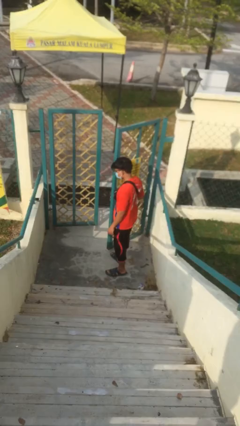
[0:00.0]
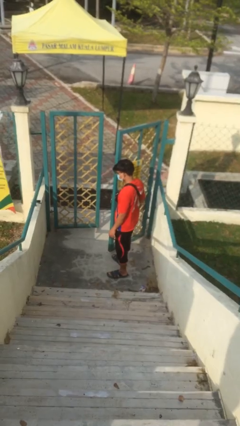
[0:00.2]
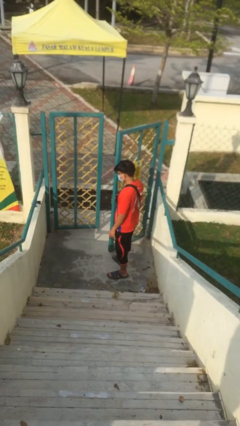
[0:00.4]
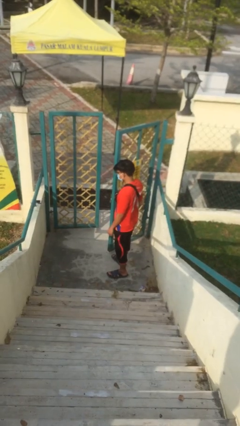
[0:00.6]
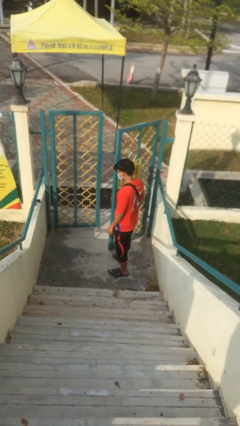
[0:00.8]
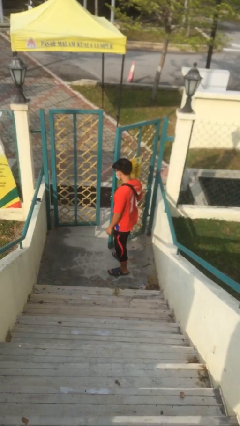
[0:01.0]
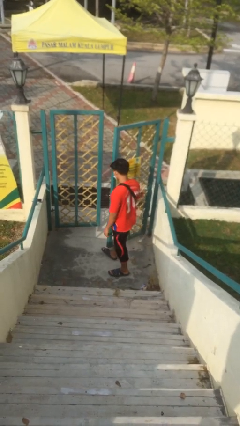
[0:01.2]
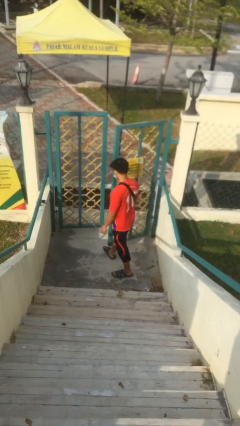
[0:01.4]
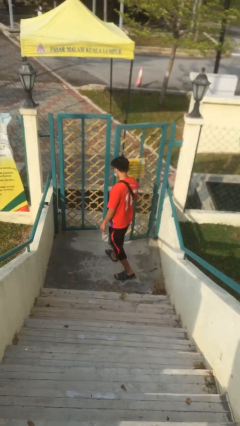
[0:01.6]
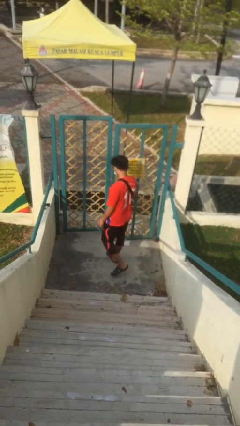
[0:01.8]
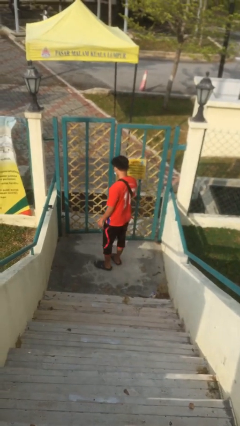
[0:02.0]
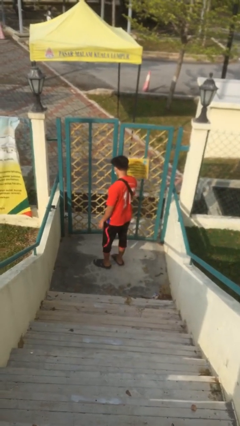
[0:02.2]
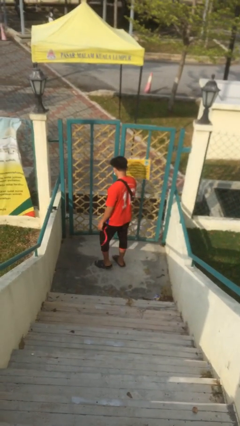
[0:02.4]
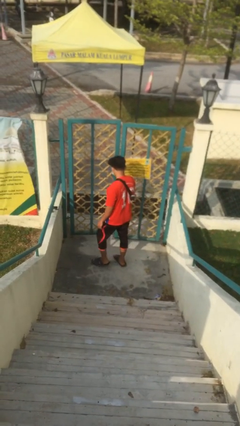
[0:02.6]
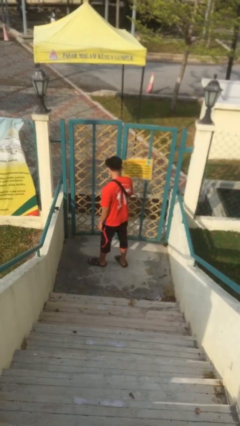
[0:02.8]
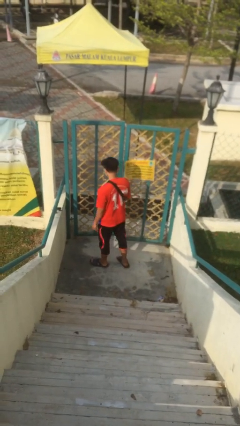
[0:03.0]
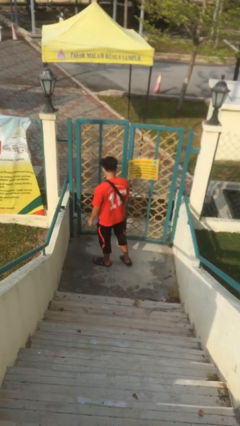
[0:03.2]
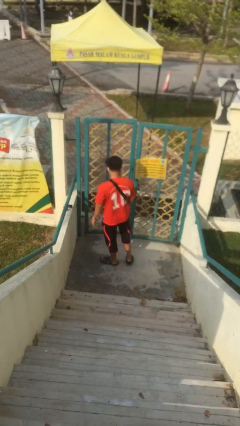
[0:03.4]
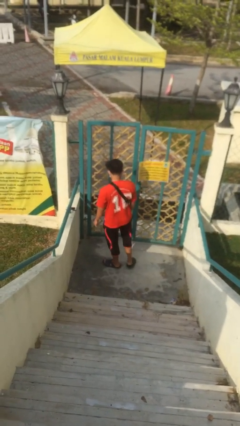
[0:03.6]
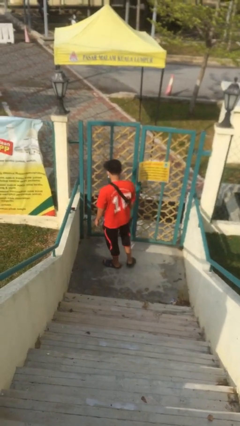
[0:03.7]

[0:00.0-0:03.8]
person closes facility door

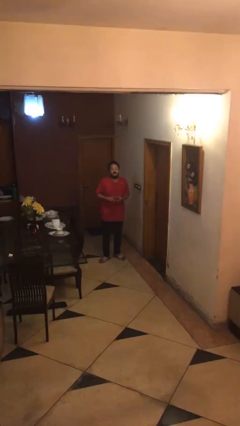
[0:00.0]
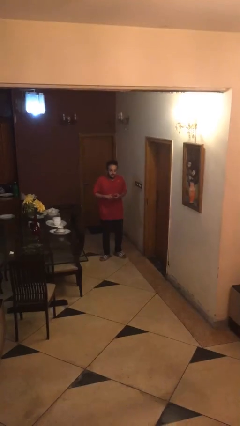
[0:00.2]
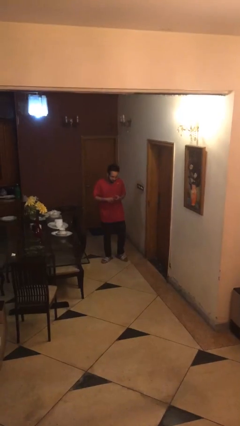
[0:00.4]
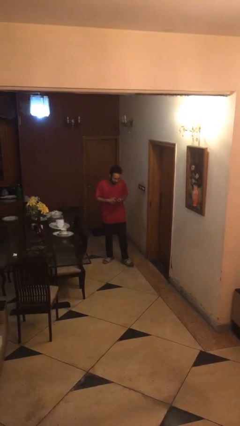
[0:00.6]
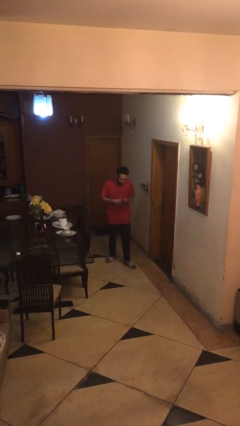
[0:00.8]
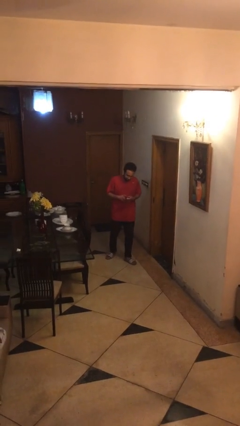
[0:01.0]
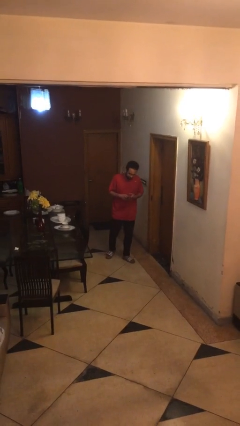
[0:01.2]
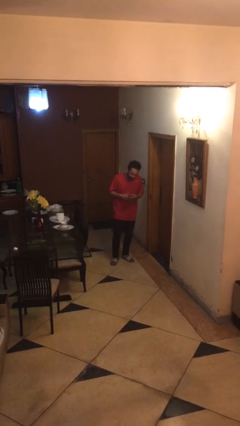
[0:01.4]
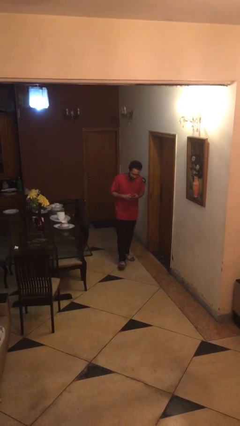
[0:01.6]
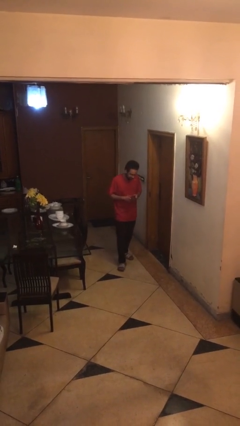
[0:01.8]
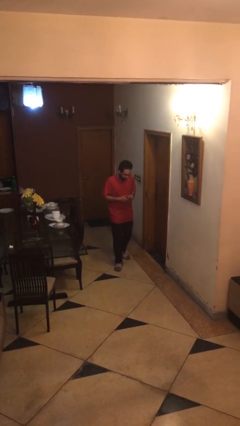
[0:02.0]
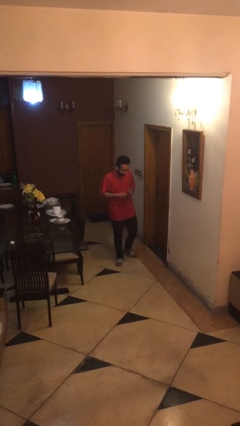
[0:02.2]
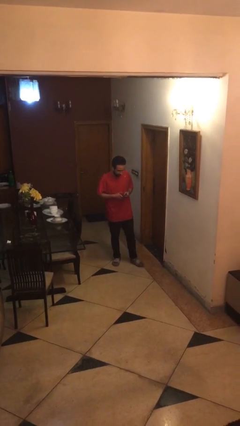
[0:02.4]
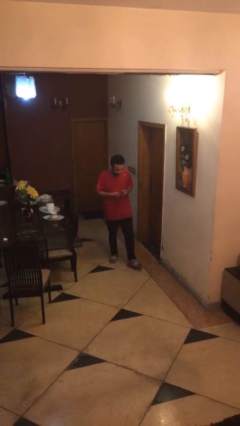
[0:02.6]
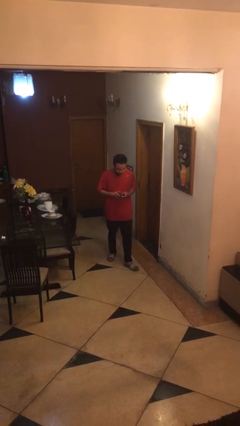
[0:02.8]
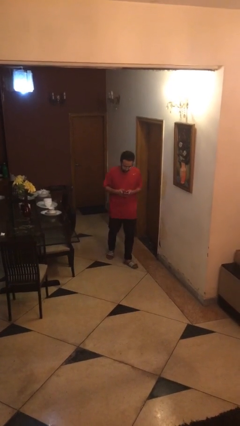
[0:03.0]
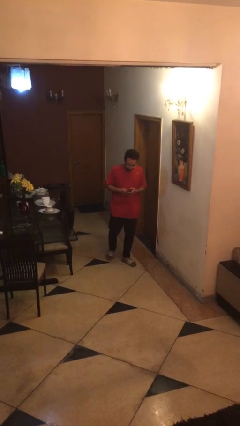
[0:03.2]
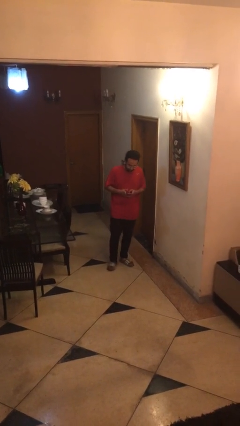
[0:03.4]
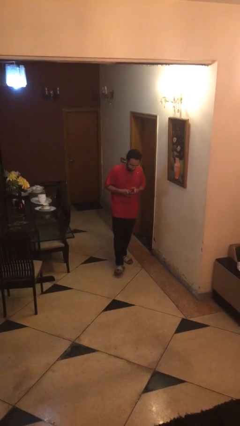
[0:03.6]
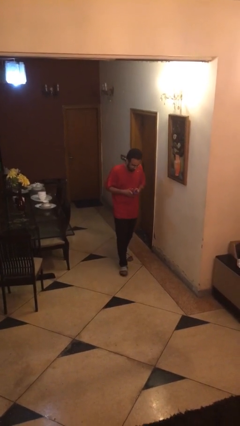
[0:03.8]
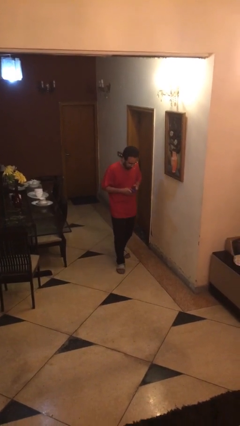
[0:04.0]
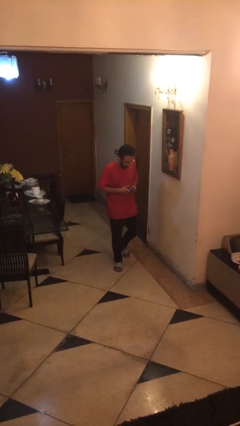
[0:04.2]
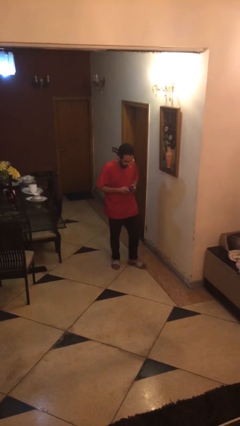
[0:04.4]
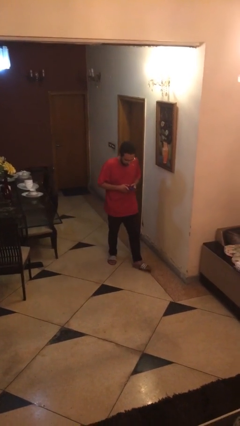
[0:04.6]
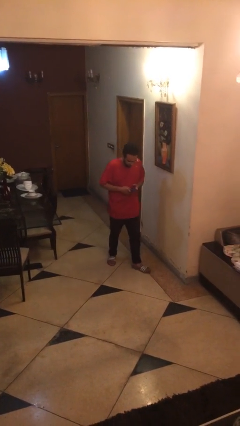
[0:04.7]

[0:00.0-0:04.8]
person texts on phone

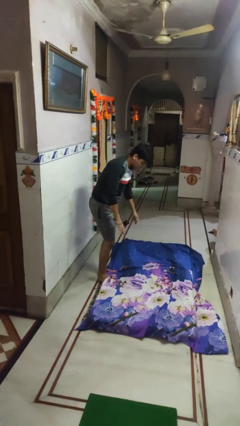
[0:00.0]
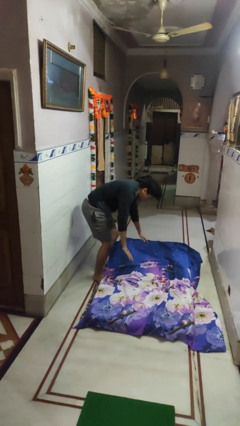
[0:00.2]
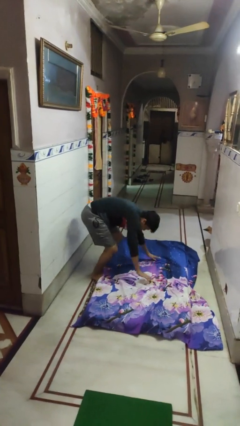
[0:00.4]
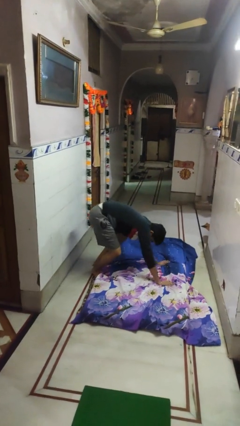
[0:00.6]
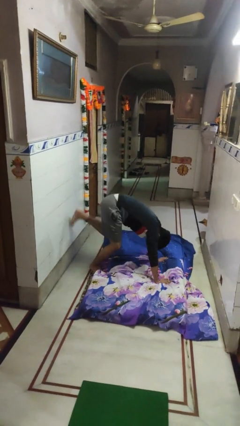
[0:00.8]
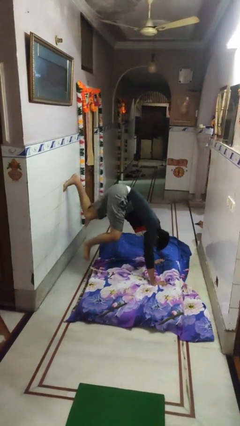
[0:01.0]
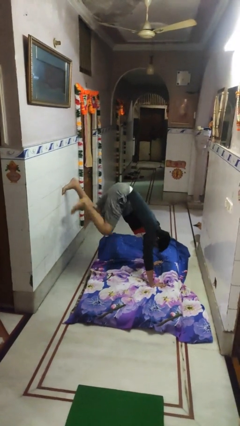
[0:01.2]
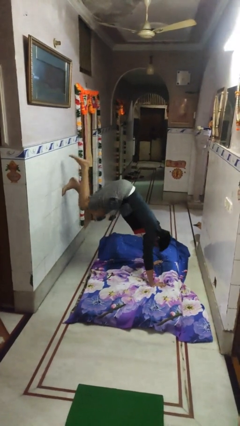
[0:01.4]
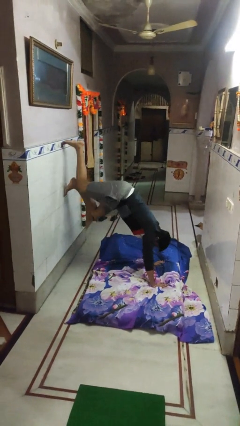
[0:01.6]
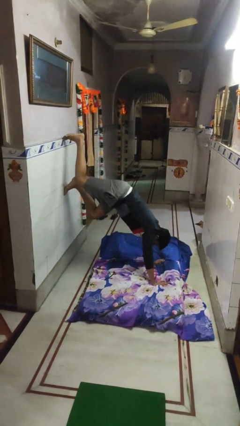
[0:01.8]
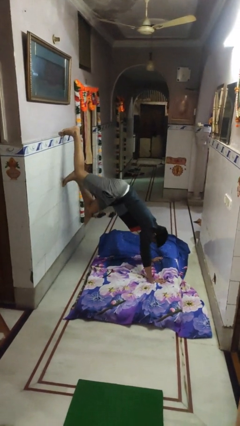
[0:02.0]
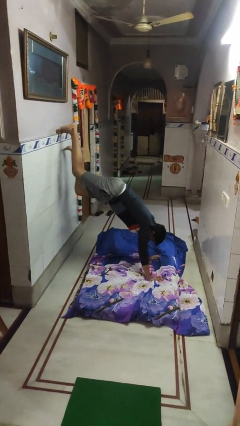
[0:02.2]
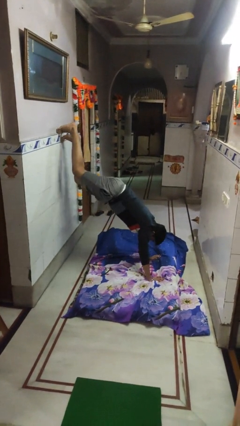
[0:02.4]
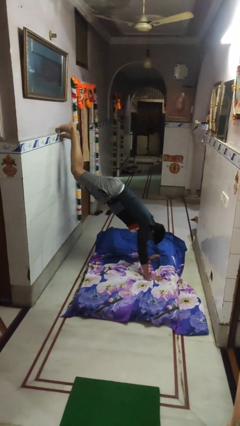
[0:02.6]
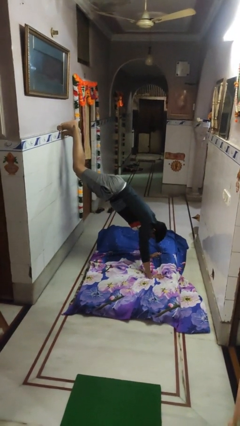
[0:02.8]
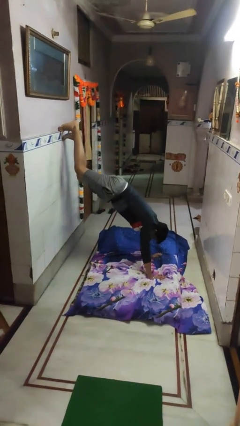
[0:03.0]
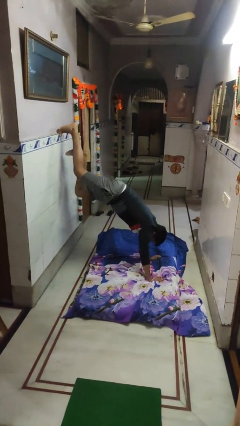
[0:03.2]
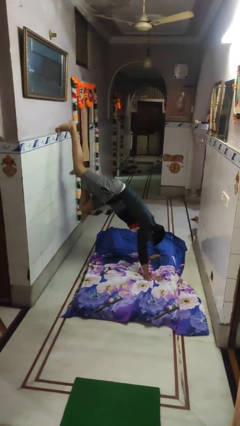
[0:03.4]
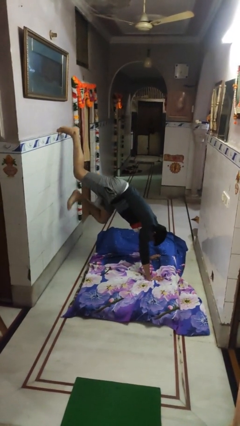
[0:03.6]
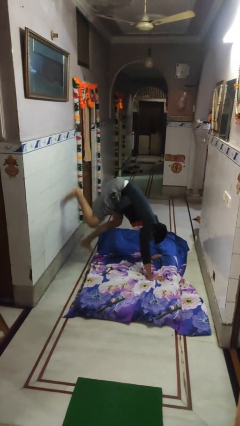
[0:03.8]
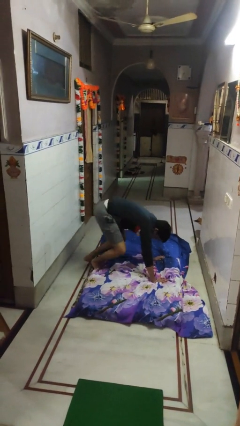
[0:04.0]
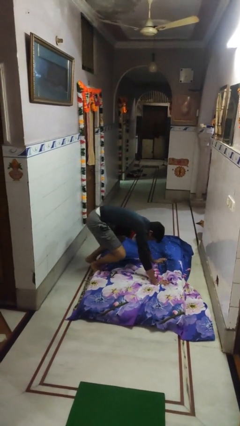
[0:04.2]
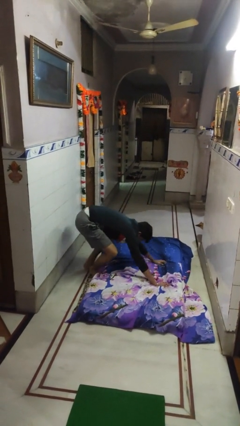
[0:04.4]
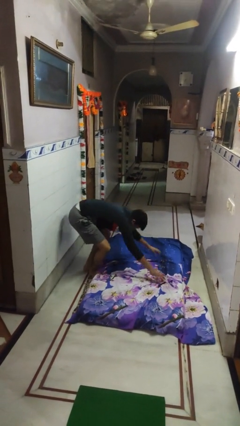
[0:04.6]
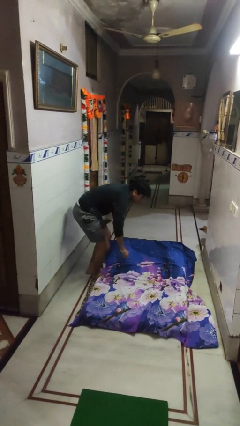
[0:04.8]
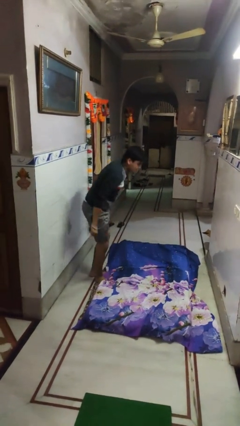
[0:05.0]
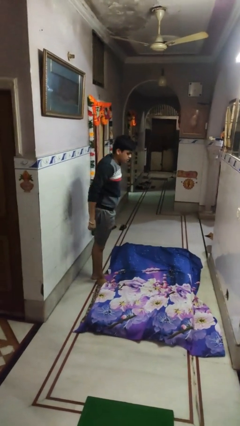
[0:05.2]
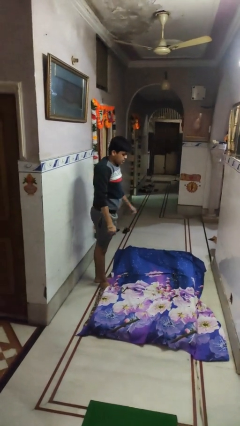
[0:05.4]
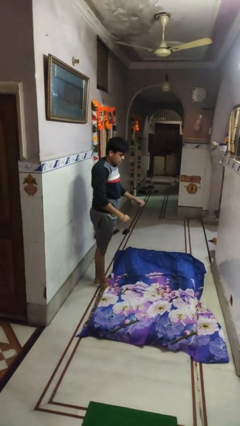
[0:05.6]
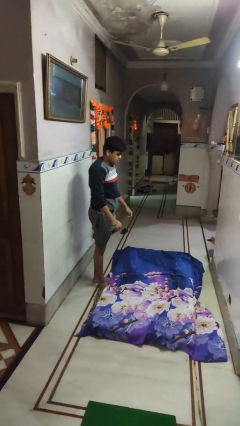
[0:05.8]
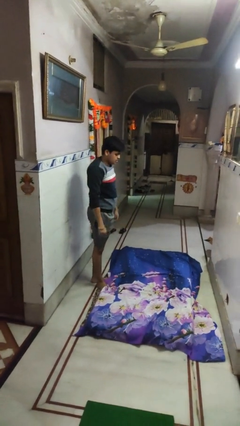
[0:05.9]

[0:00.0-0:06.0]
person handstand

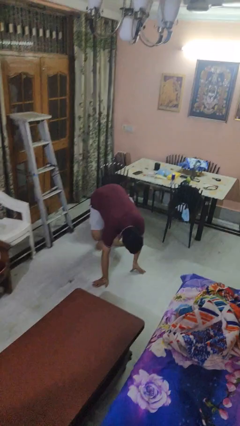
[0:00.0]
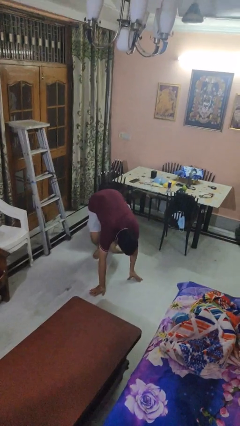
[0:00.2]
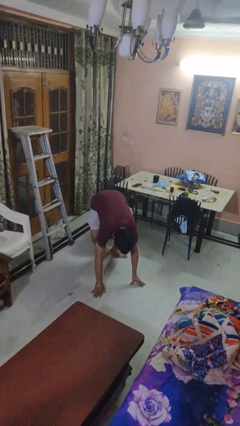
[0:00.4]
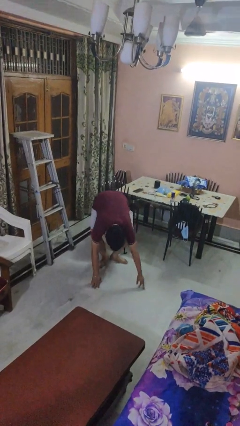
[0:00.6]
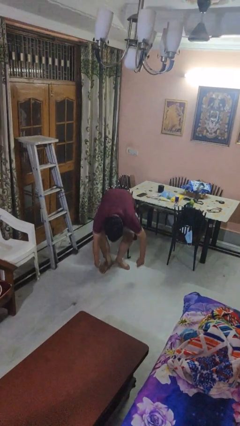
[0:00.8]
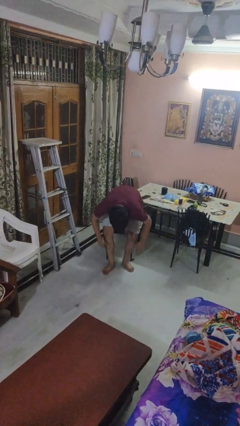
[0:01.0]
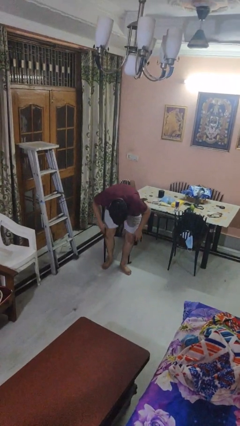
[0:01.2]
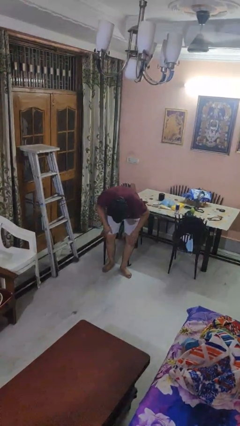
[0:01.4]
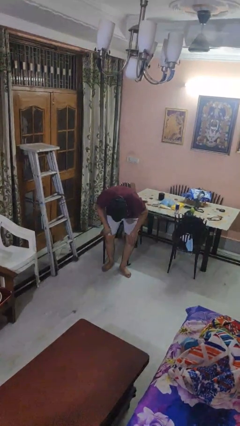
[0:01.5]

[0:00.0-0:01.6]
person stands up from floor

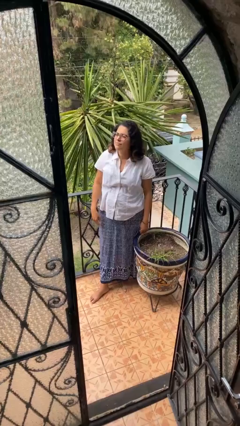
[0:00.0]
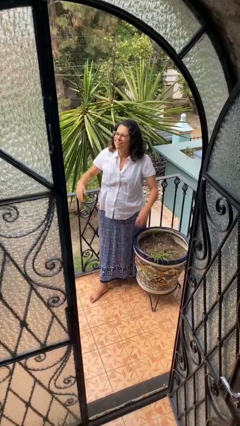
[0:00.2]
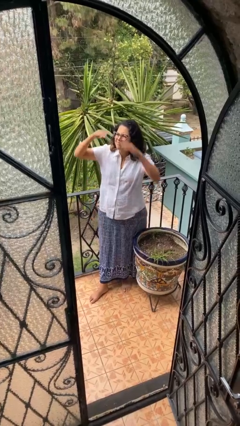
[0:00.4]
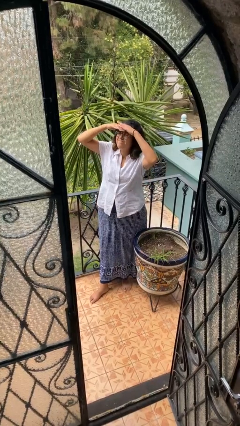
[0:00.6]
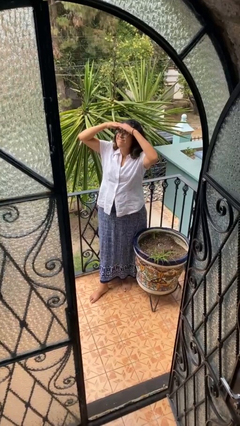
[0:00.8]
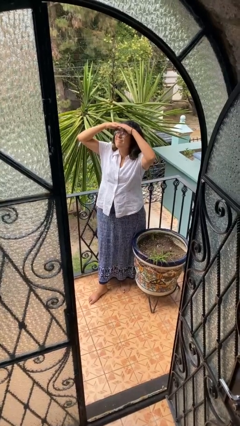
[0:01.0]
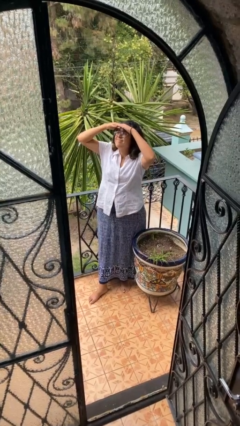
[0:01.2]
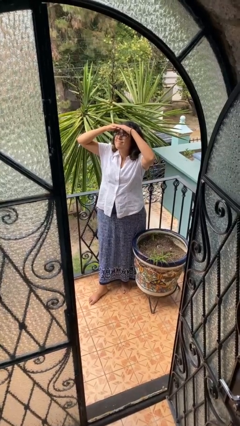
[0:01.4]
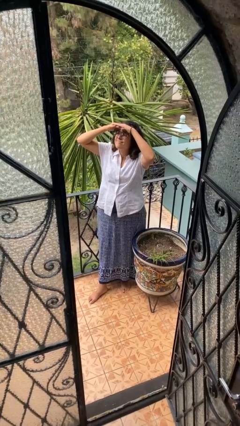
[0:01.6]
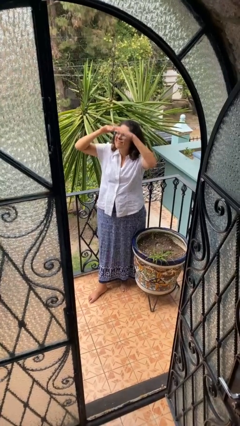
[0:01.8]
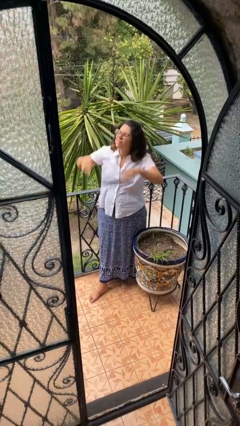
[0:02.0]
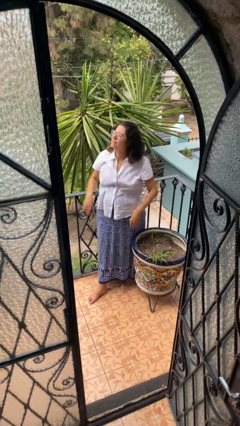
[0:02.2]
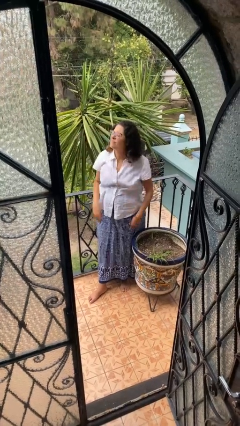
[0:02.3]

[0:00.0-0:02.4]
person shades eyes
